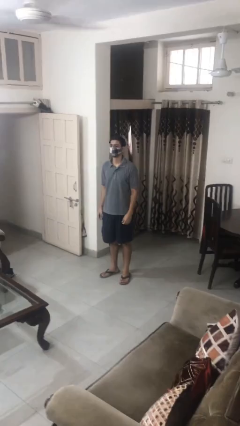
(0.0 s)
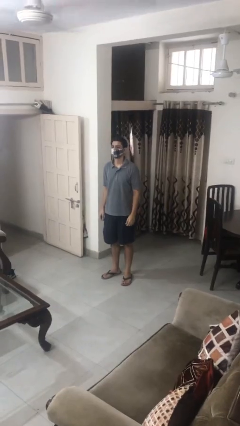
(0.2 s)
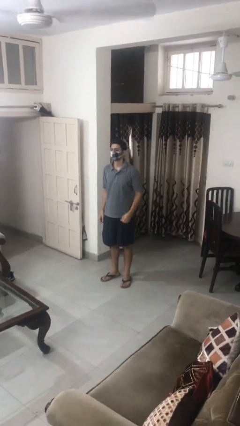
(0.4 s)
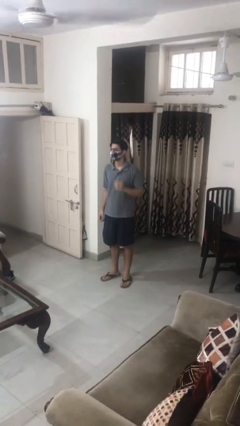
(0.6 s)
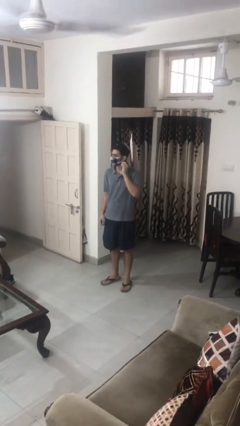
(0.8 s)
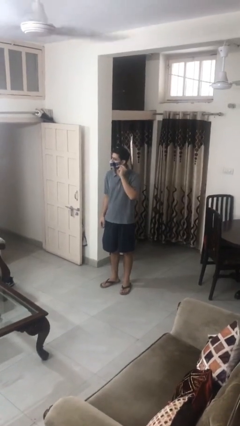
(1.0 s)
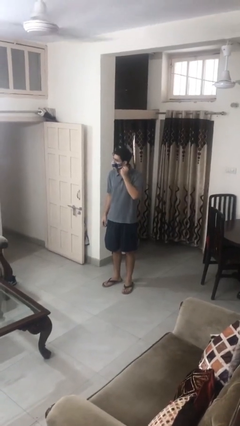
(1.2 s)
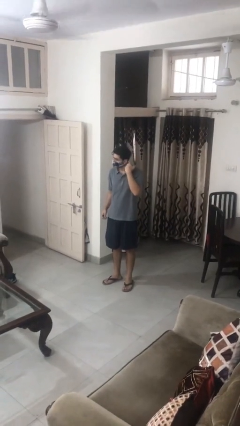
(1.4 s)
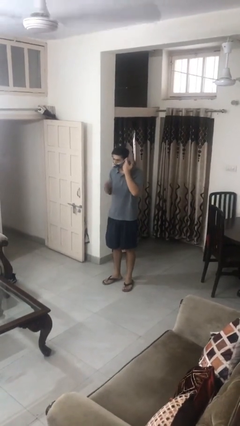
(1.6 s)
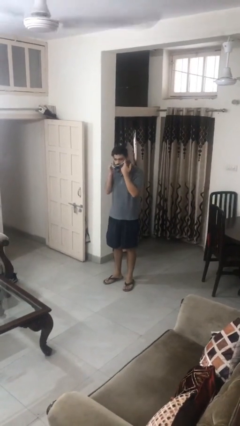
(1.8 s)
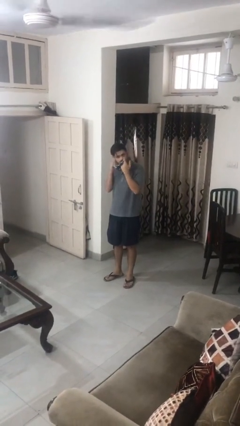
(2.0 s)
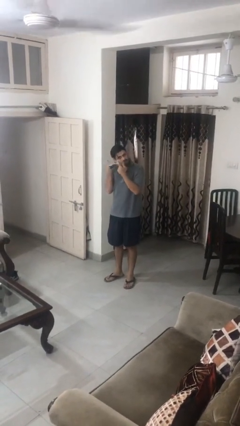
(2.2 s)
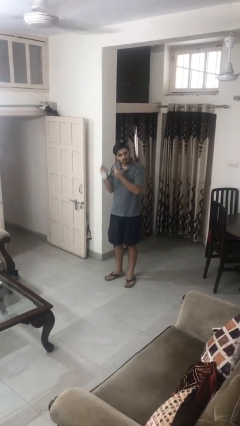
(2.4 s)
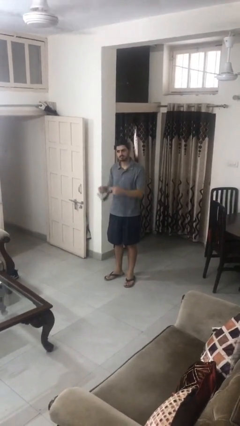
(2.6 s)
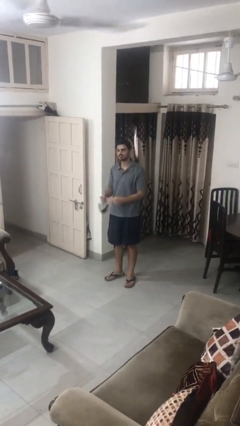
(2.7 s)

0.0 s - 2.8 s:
person takes off facemask

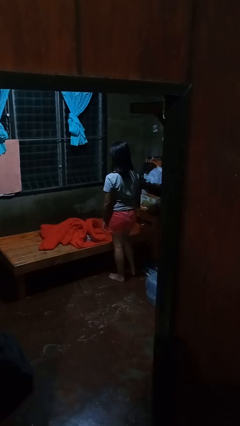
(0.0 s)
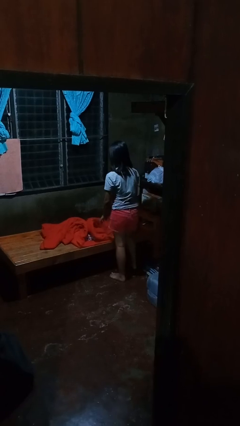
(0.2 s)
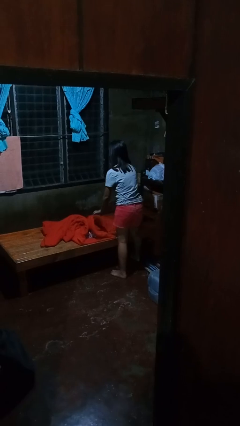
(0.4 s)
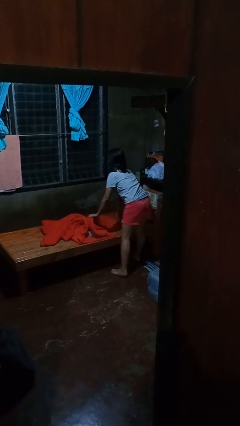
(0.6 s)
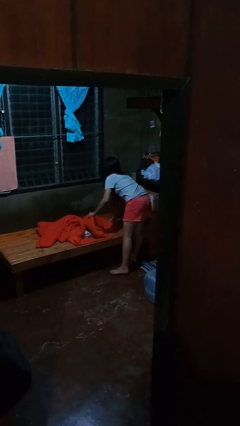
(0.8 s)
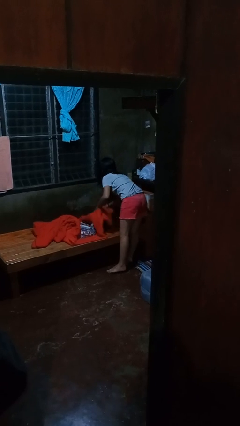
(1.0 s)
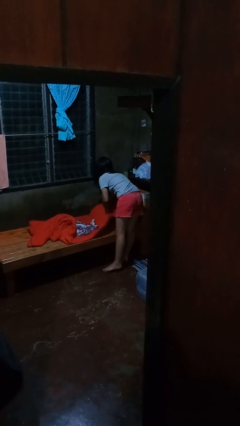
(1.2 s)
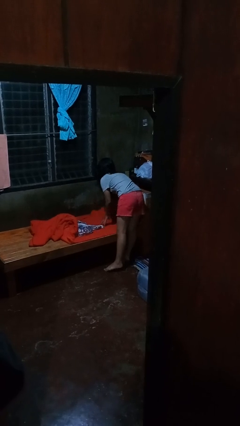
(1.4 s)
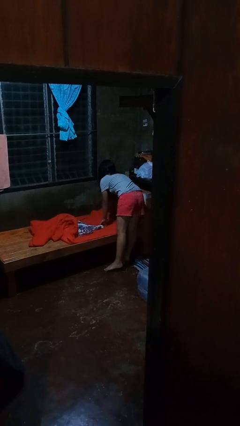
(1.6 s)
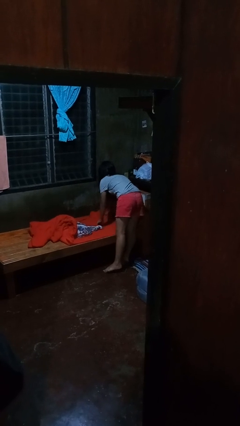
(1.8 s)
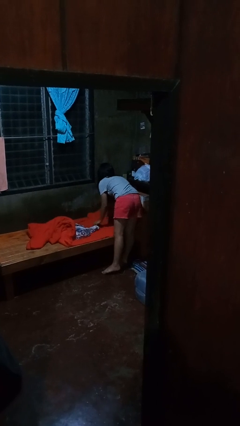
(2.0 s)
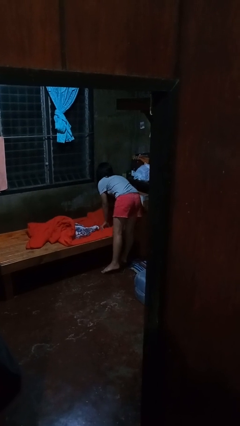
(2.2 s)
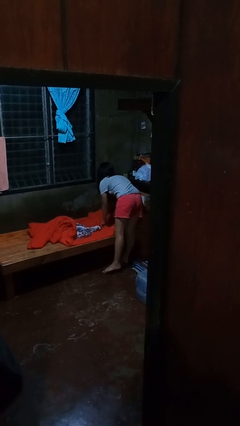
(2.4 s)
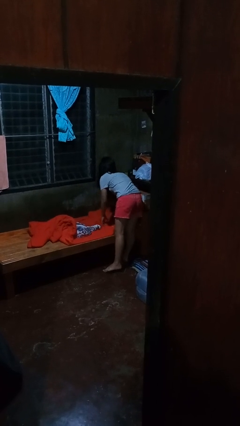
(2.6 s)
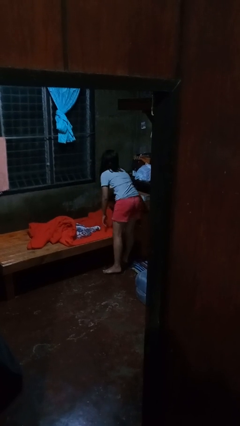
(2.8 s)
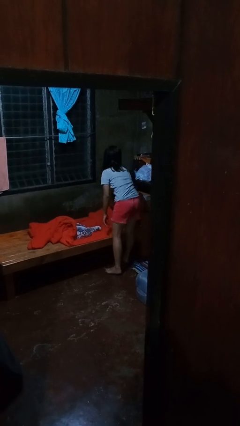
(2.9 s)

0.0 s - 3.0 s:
person makes bed

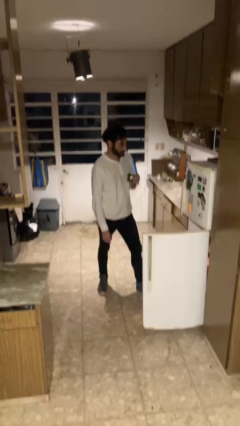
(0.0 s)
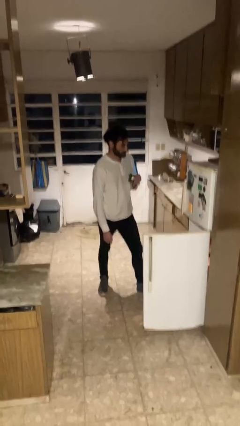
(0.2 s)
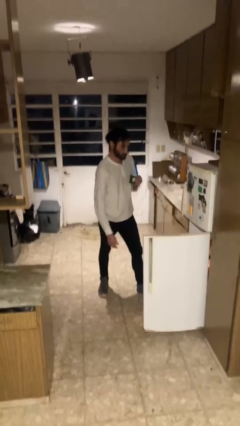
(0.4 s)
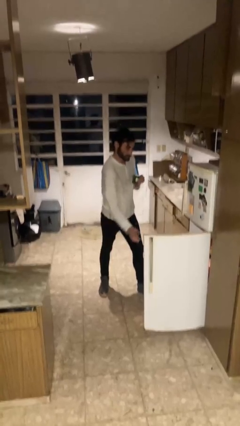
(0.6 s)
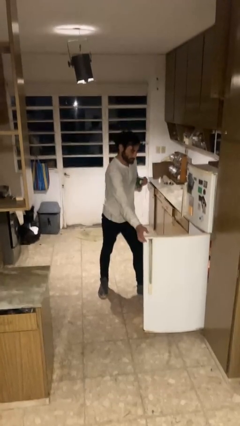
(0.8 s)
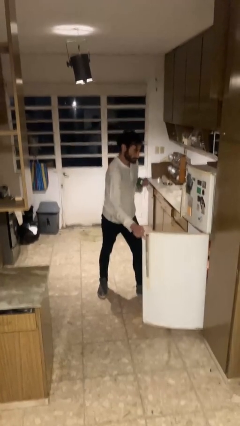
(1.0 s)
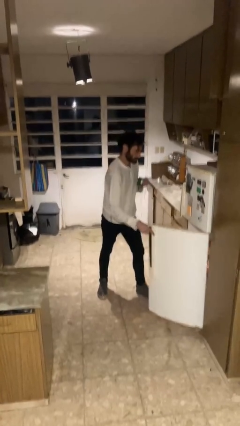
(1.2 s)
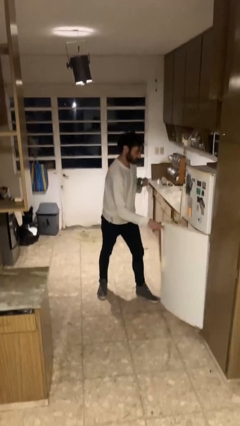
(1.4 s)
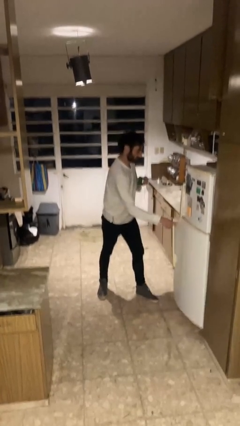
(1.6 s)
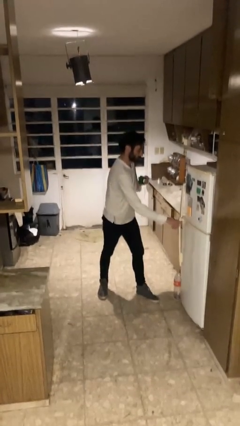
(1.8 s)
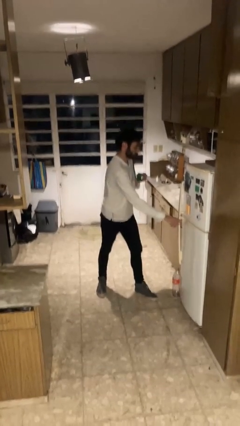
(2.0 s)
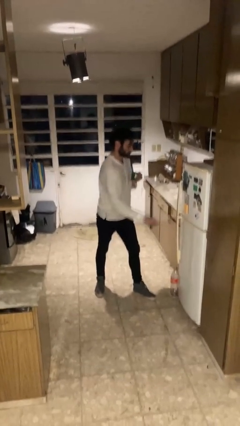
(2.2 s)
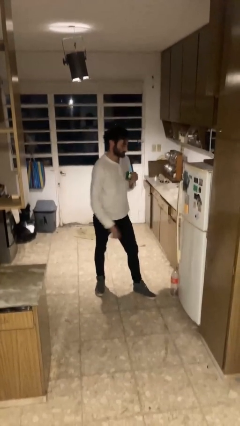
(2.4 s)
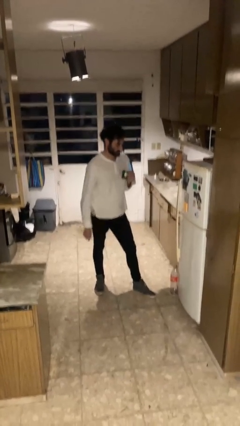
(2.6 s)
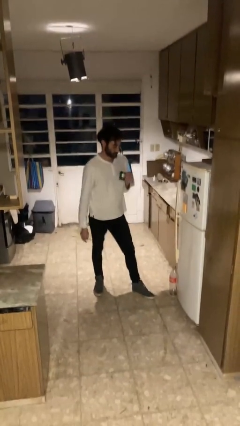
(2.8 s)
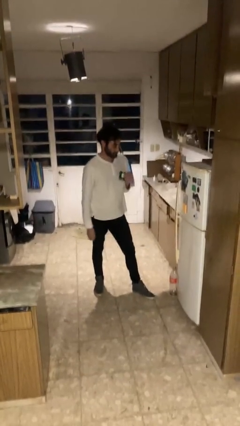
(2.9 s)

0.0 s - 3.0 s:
person closes refrigerator

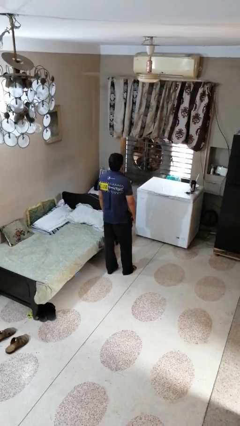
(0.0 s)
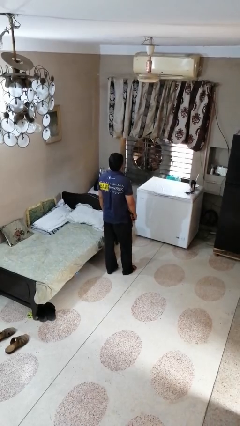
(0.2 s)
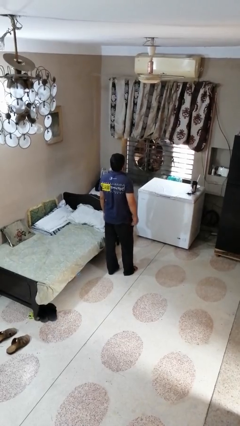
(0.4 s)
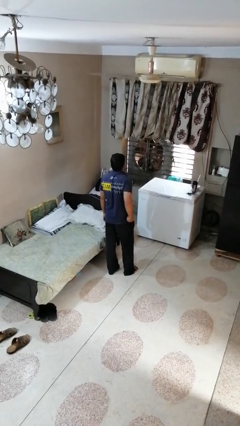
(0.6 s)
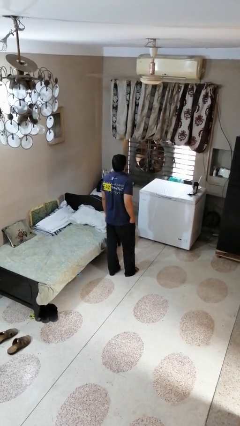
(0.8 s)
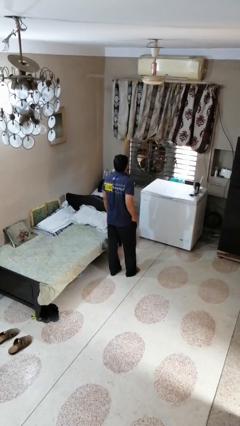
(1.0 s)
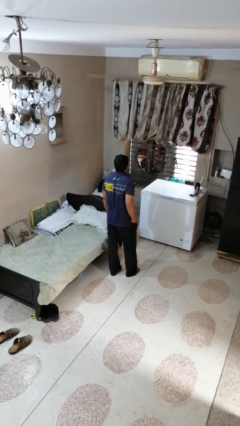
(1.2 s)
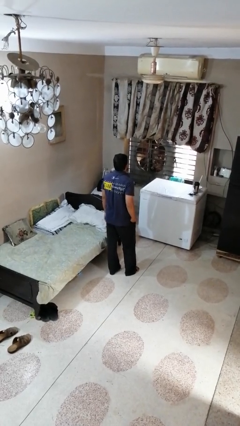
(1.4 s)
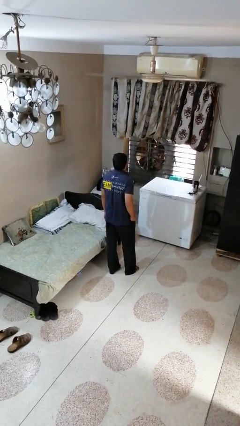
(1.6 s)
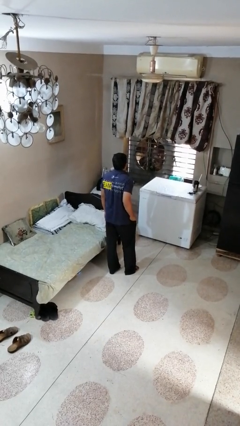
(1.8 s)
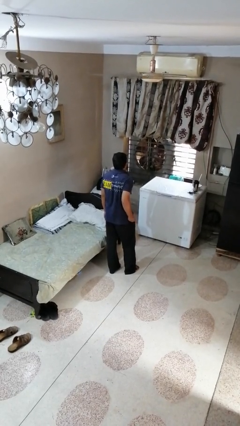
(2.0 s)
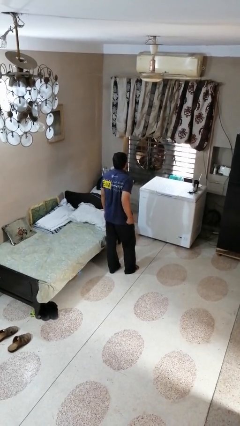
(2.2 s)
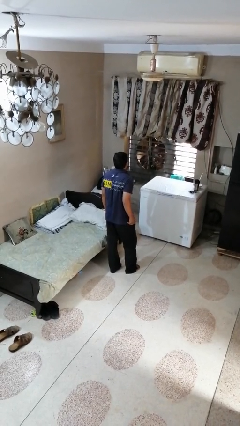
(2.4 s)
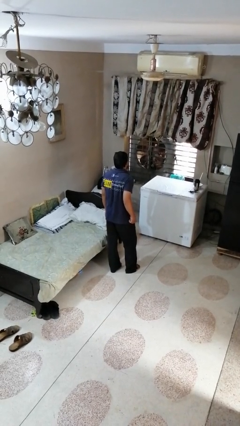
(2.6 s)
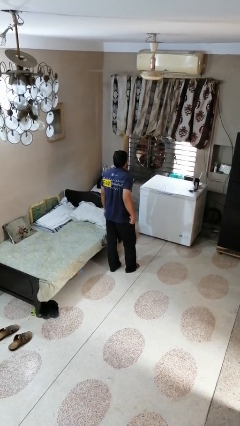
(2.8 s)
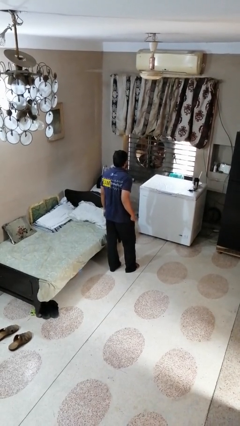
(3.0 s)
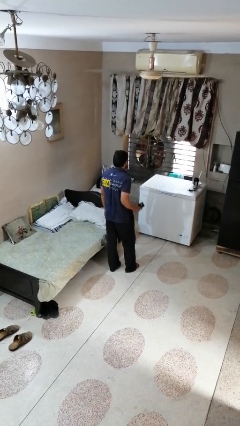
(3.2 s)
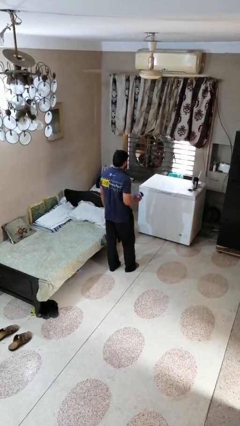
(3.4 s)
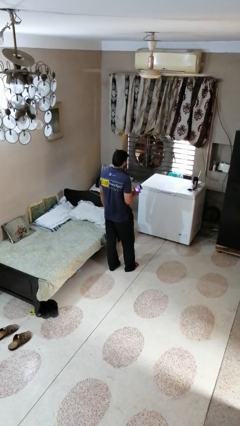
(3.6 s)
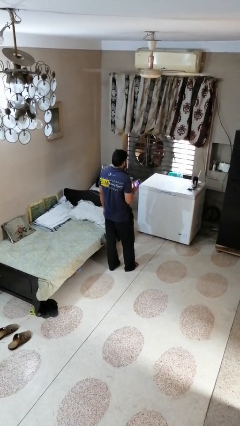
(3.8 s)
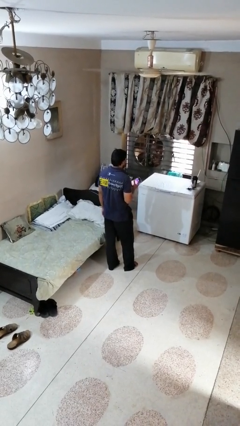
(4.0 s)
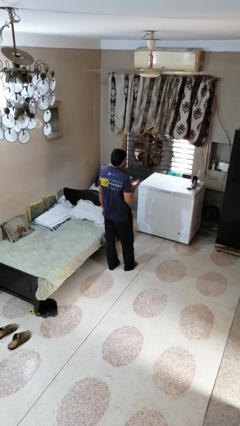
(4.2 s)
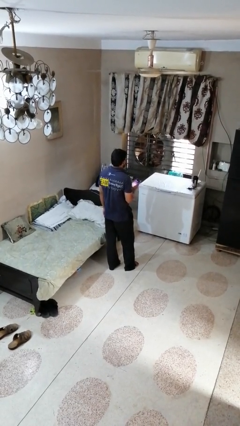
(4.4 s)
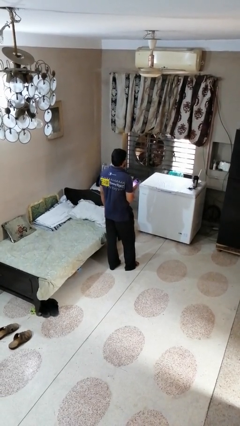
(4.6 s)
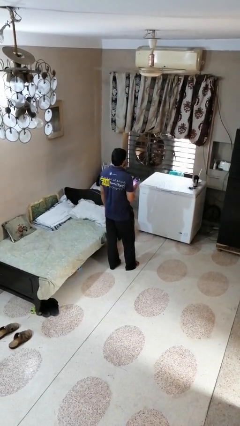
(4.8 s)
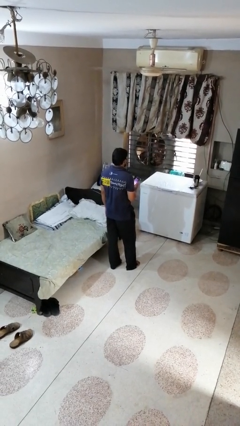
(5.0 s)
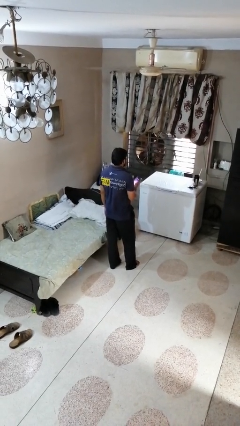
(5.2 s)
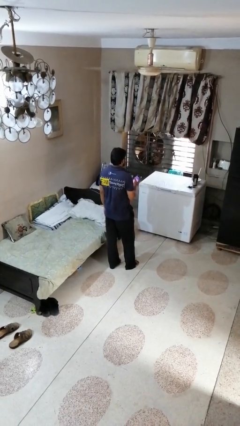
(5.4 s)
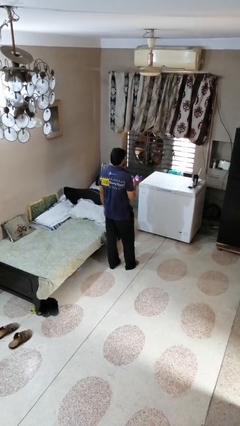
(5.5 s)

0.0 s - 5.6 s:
person takes phone from pocket

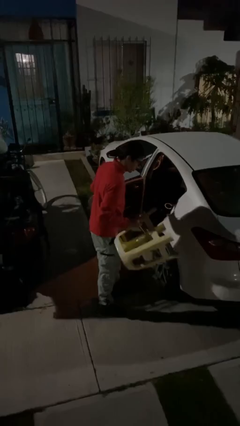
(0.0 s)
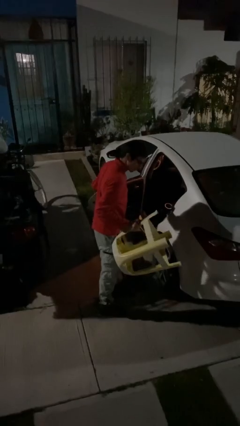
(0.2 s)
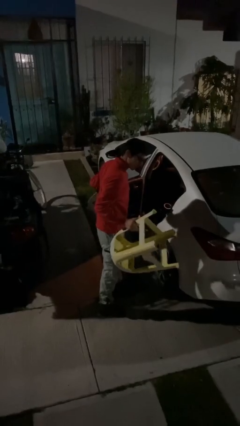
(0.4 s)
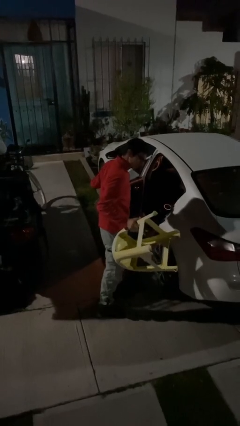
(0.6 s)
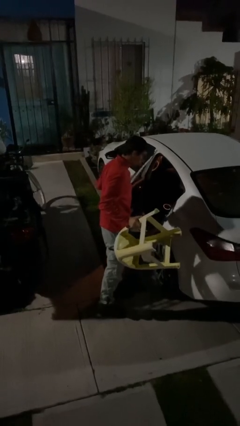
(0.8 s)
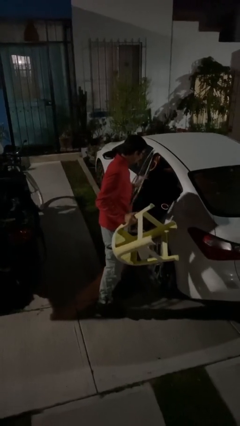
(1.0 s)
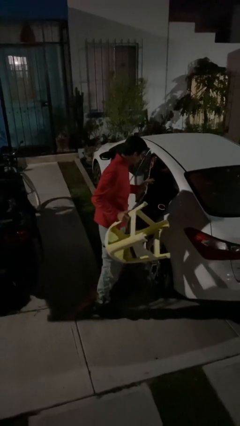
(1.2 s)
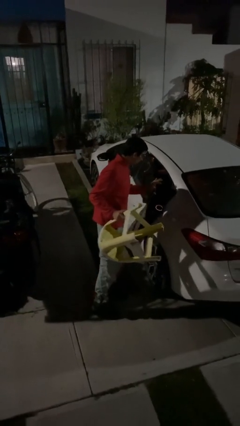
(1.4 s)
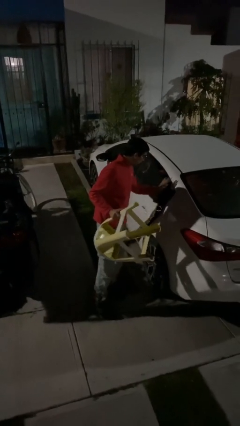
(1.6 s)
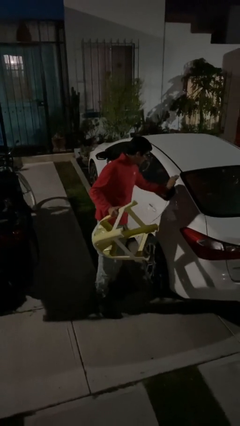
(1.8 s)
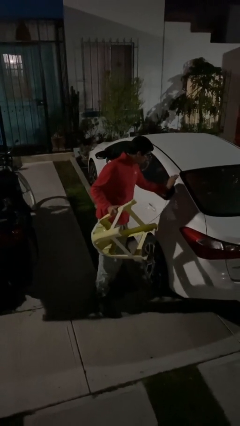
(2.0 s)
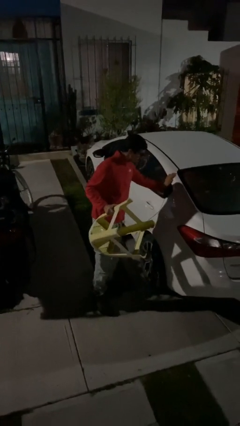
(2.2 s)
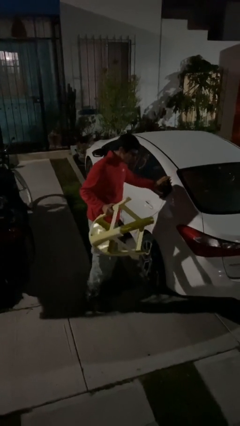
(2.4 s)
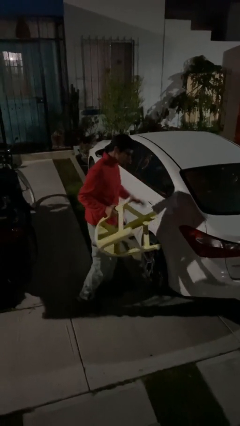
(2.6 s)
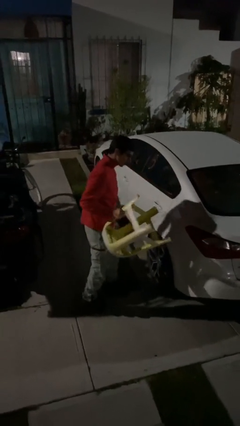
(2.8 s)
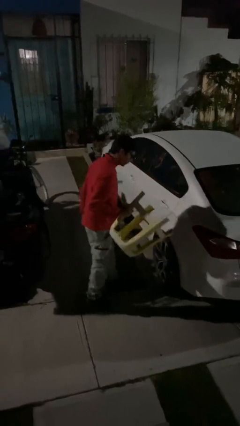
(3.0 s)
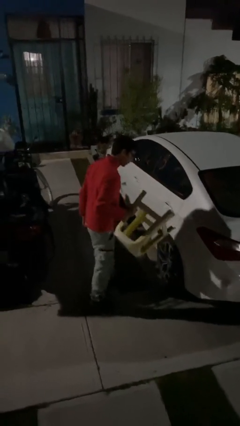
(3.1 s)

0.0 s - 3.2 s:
person closes car door
